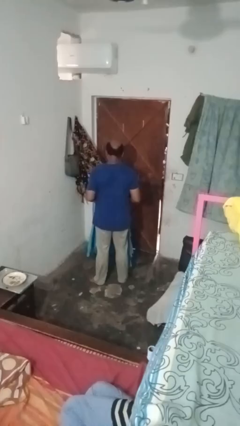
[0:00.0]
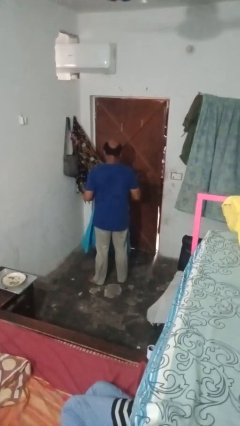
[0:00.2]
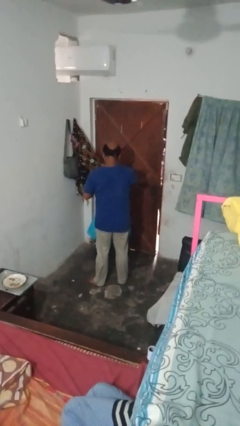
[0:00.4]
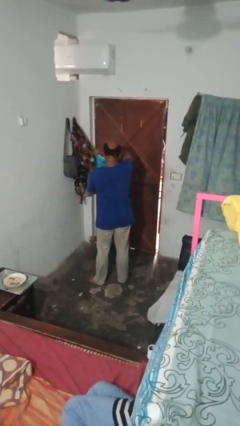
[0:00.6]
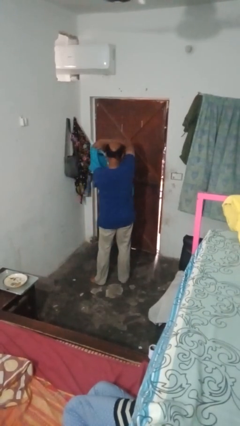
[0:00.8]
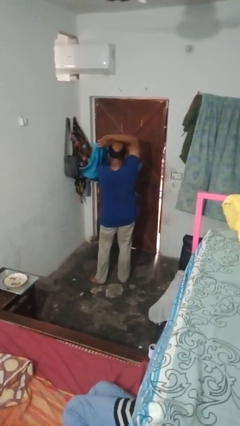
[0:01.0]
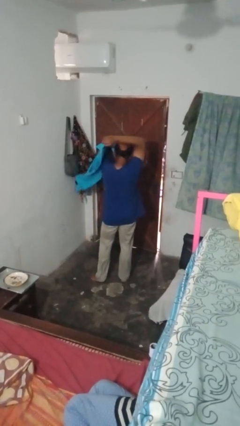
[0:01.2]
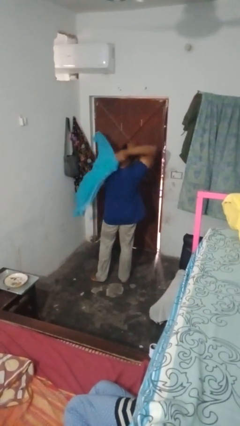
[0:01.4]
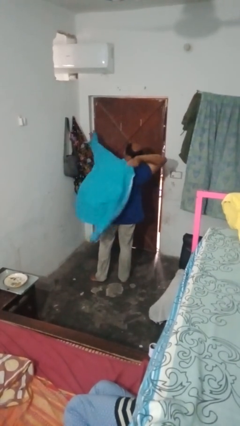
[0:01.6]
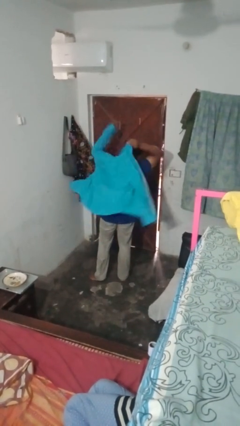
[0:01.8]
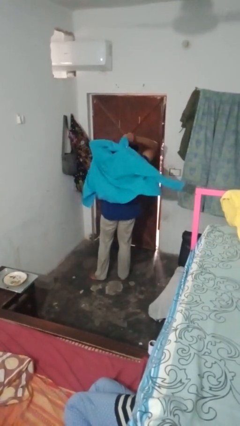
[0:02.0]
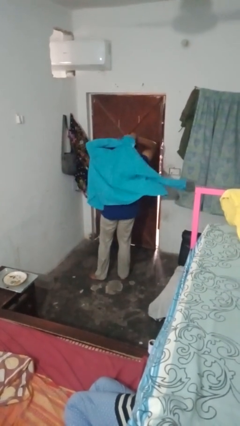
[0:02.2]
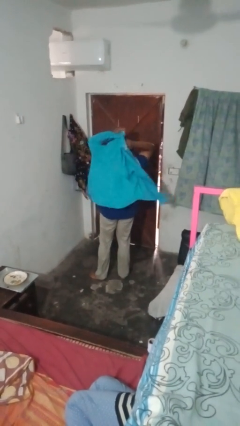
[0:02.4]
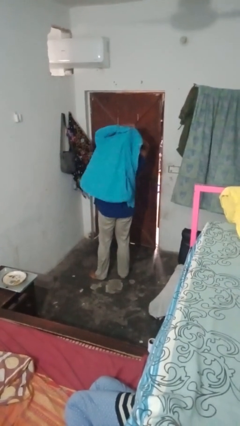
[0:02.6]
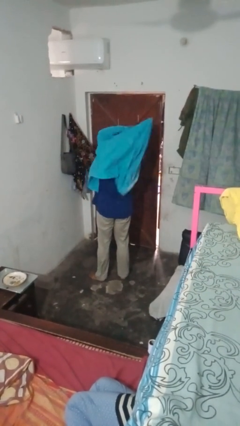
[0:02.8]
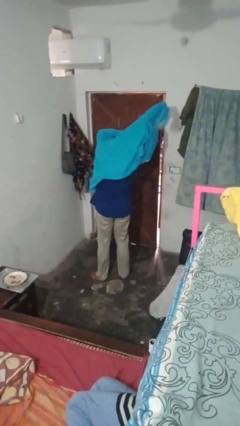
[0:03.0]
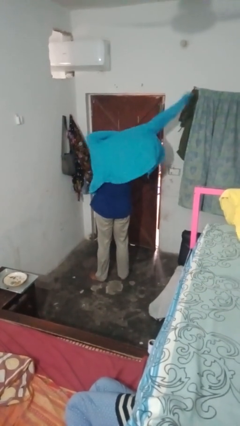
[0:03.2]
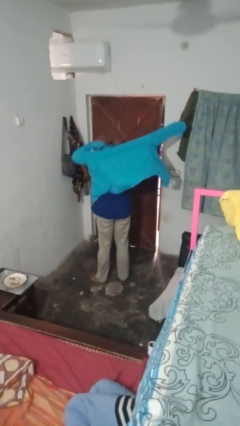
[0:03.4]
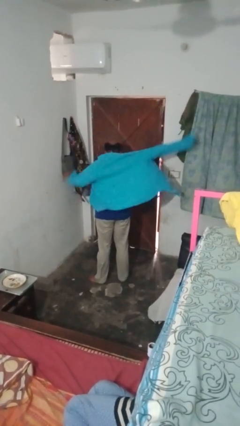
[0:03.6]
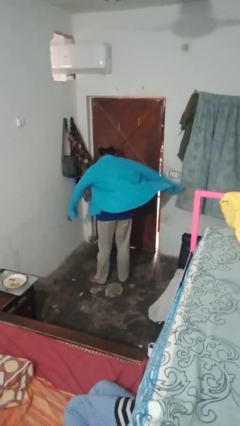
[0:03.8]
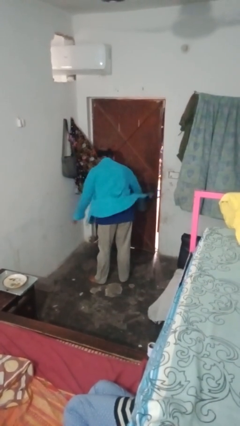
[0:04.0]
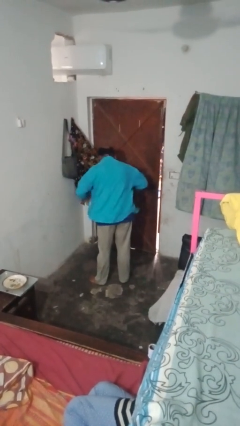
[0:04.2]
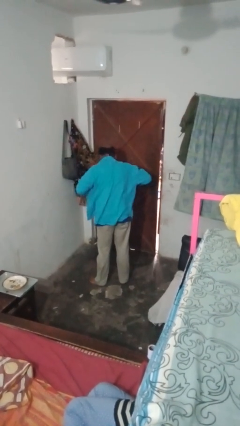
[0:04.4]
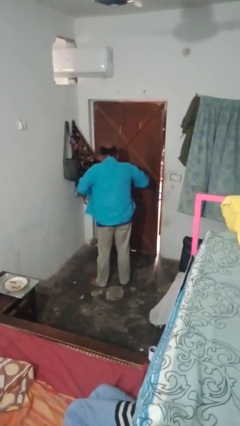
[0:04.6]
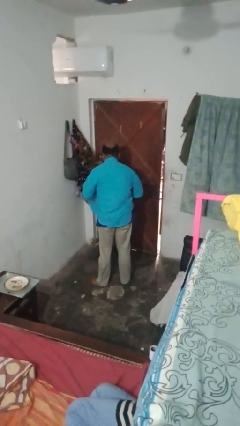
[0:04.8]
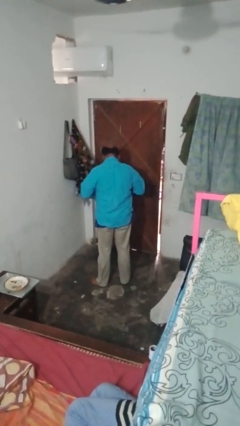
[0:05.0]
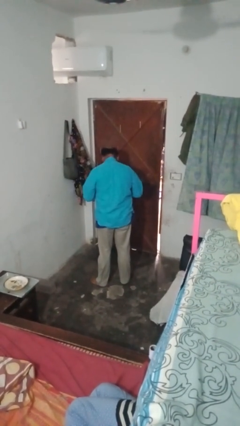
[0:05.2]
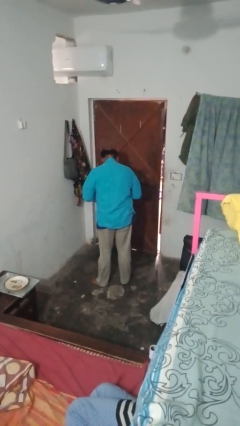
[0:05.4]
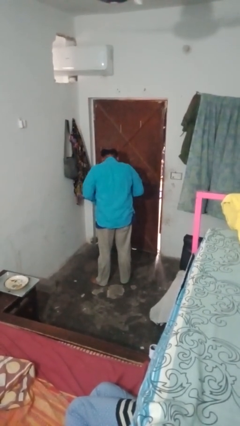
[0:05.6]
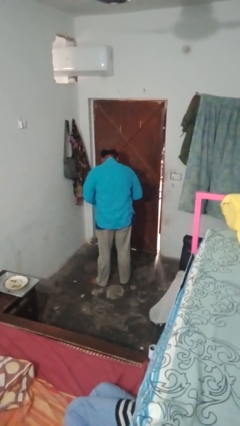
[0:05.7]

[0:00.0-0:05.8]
person puts on shirt

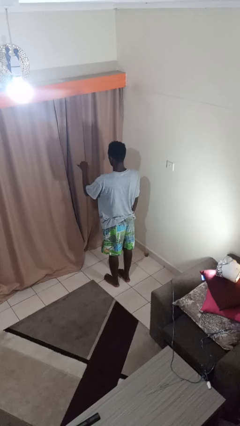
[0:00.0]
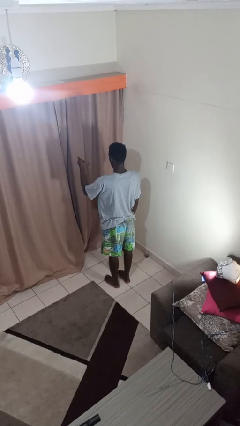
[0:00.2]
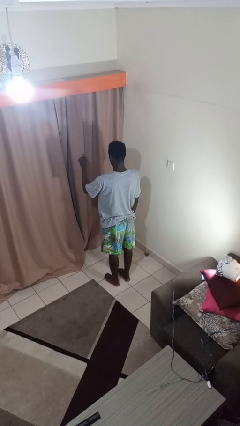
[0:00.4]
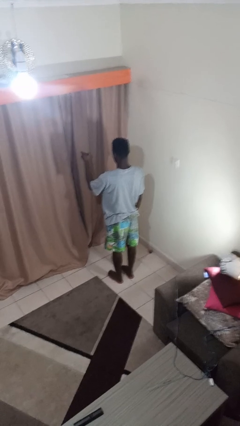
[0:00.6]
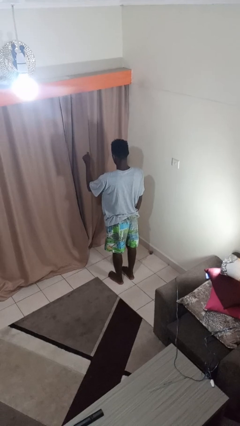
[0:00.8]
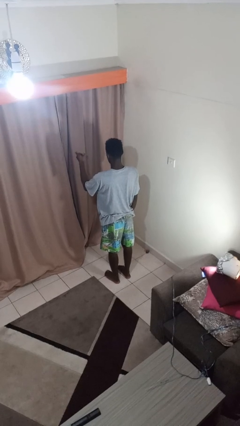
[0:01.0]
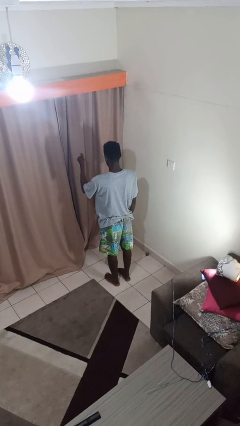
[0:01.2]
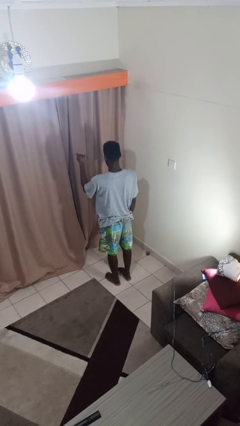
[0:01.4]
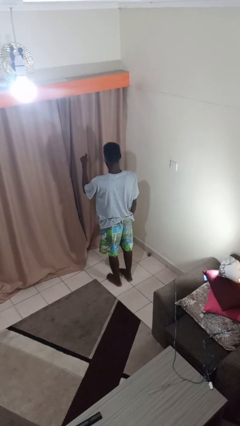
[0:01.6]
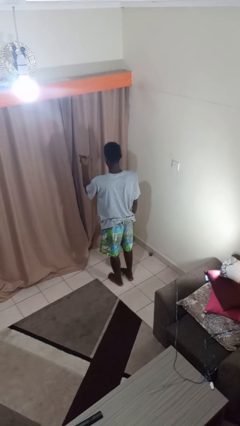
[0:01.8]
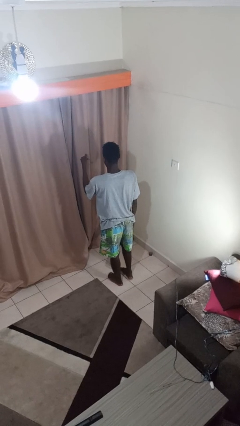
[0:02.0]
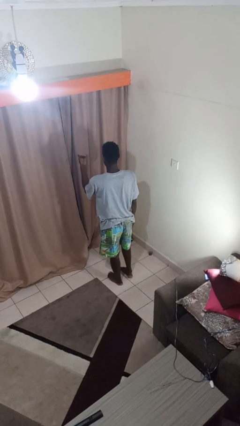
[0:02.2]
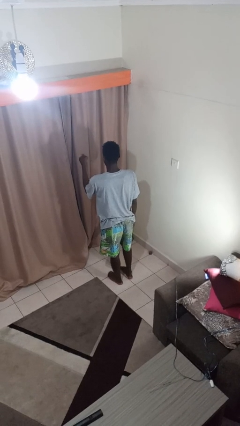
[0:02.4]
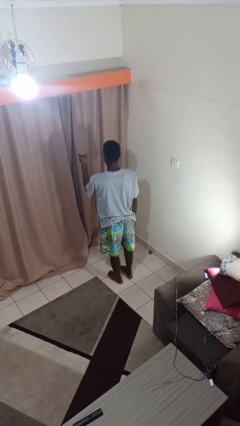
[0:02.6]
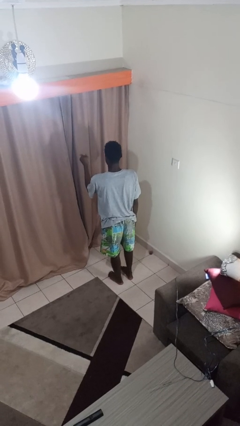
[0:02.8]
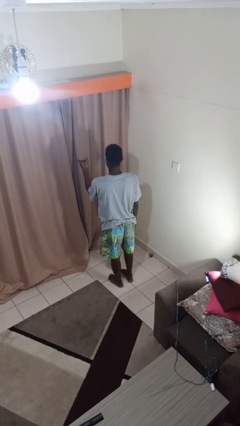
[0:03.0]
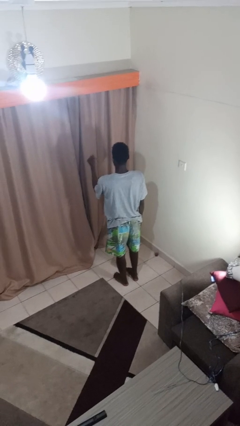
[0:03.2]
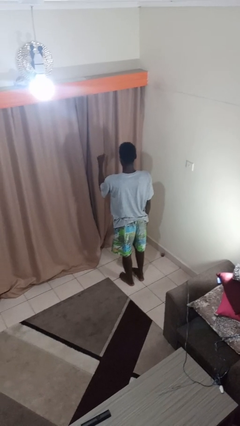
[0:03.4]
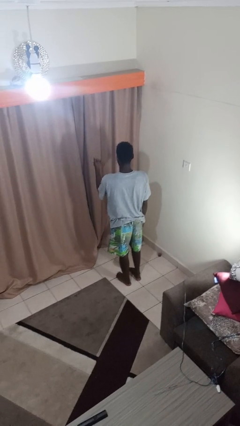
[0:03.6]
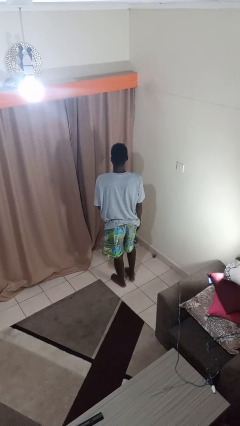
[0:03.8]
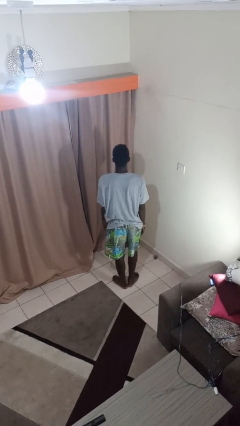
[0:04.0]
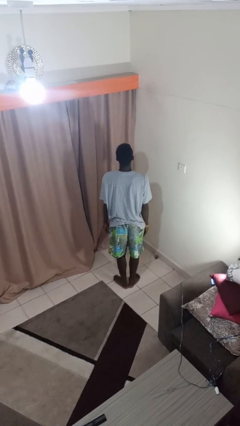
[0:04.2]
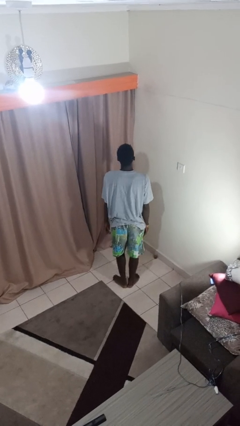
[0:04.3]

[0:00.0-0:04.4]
person gestures hang loose

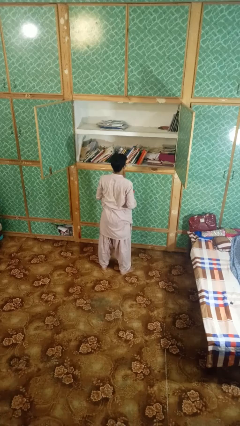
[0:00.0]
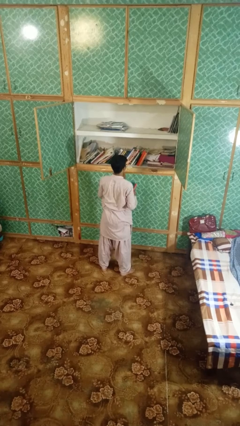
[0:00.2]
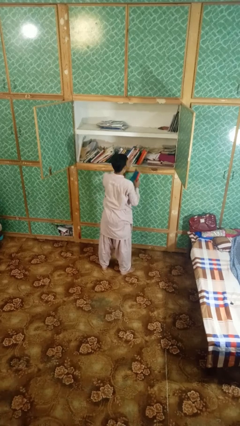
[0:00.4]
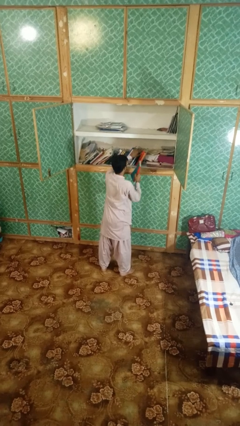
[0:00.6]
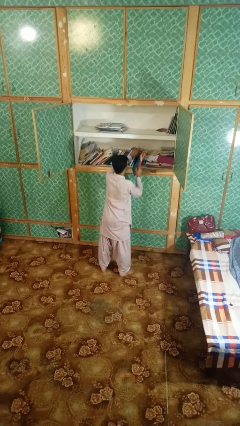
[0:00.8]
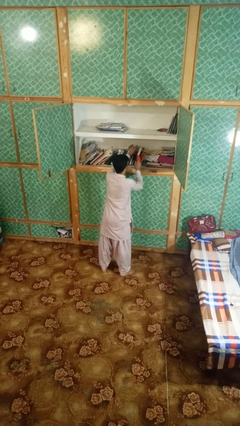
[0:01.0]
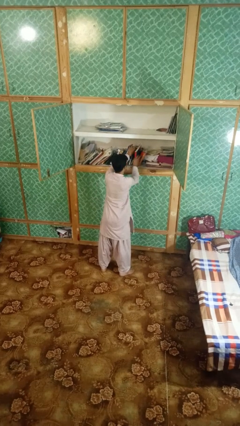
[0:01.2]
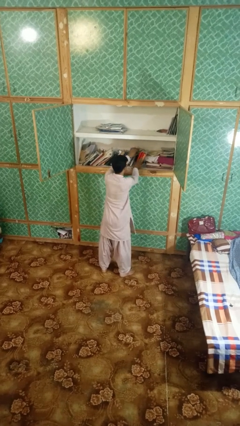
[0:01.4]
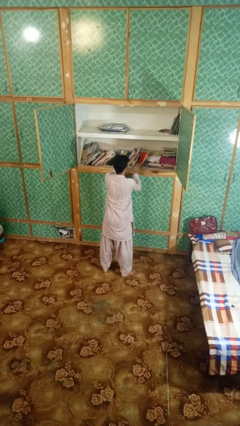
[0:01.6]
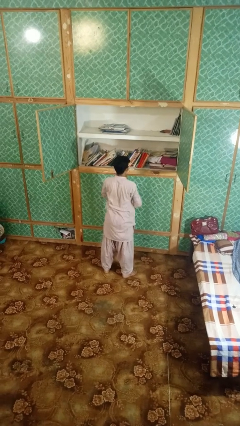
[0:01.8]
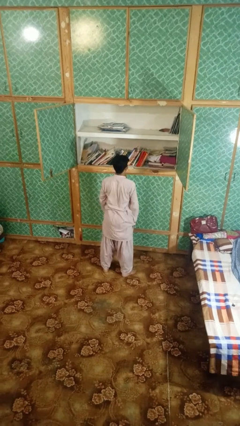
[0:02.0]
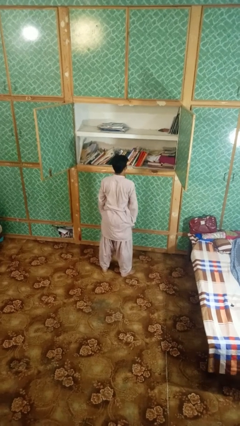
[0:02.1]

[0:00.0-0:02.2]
person puts down object on shelf

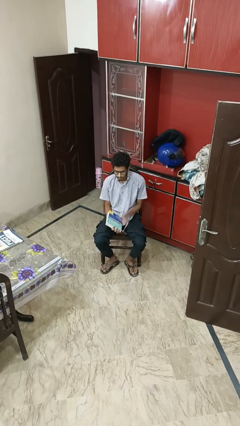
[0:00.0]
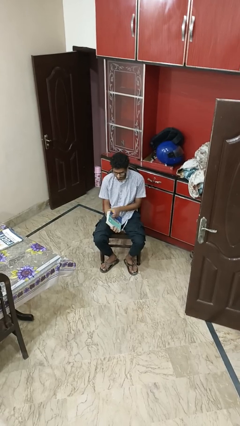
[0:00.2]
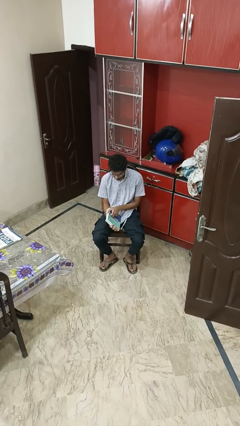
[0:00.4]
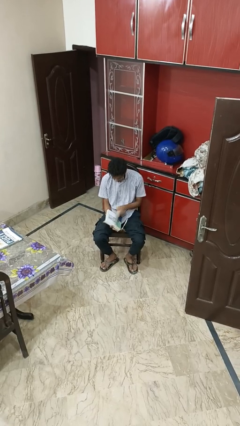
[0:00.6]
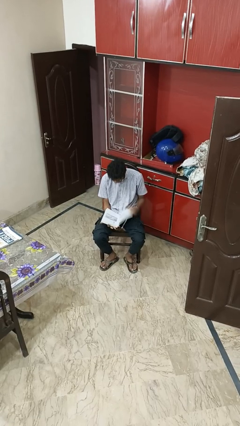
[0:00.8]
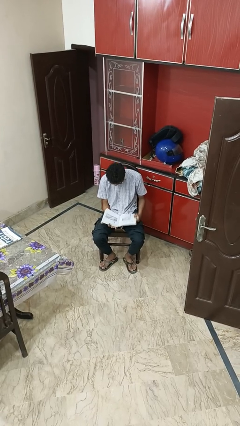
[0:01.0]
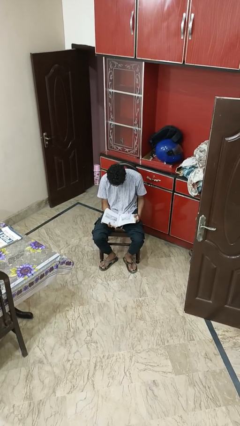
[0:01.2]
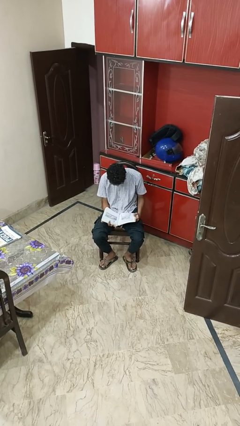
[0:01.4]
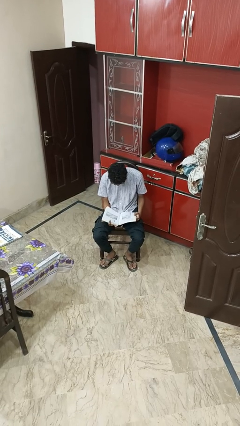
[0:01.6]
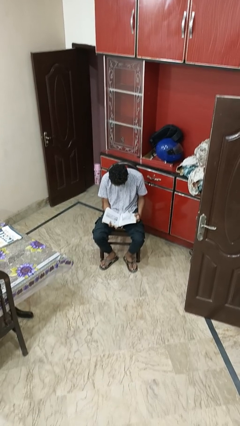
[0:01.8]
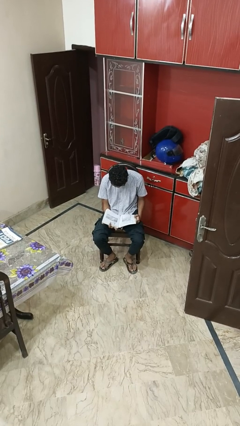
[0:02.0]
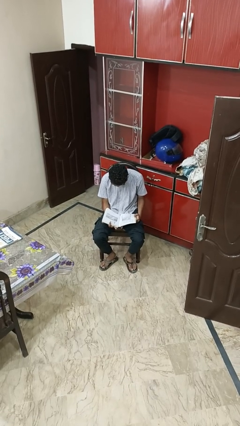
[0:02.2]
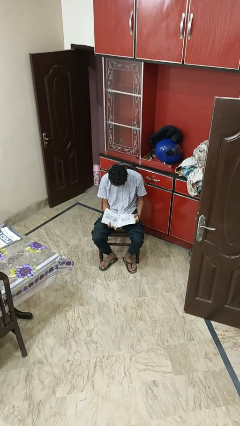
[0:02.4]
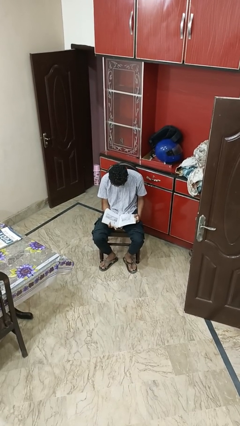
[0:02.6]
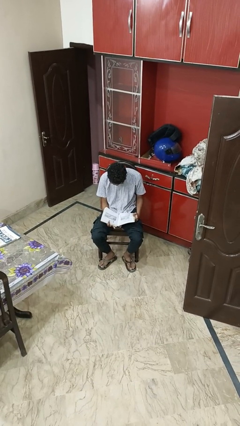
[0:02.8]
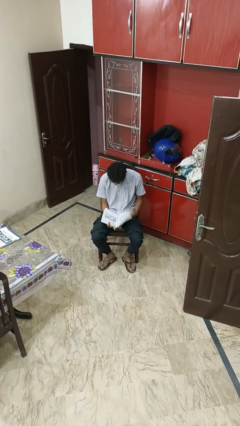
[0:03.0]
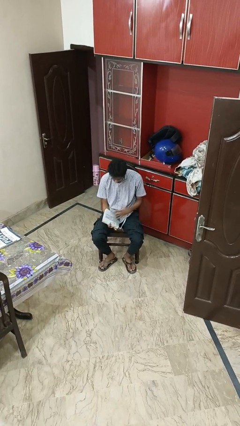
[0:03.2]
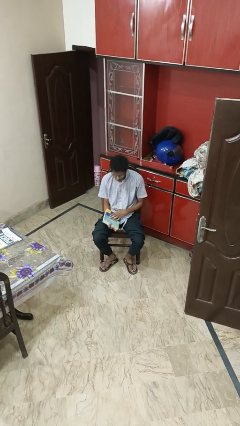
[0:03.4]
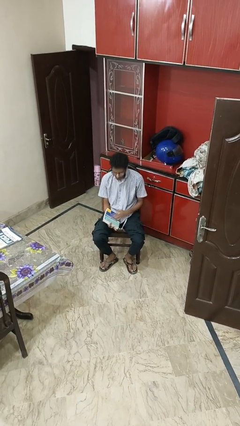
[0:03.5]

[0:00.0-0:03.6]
person reads book

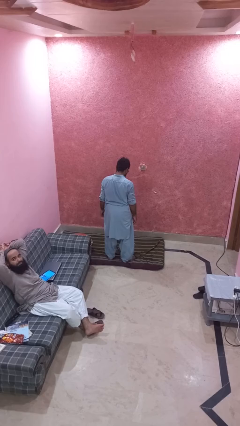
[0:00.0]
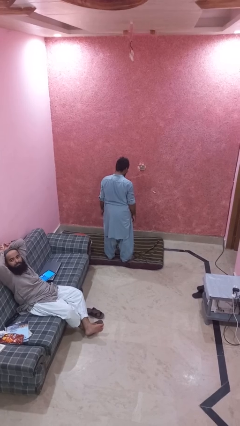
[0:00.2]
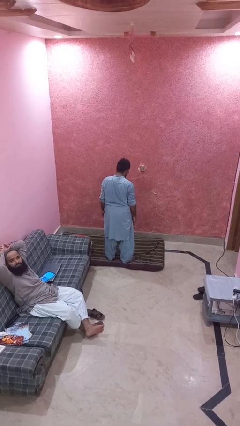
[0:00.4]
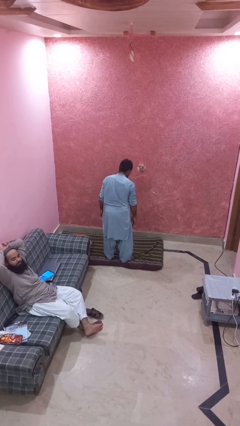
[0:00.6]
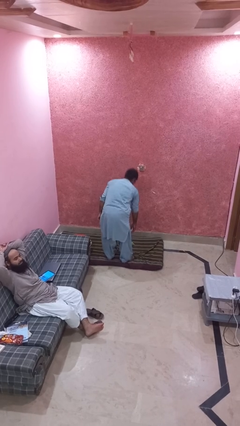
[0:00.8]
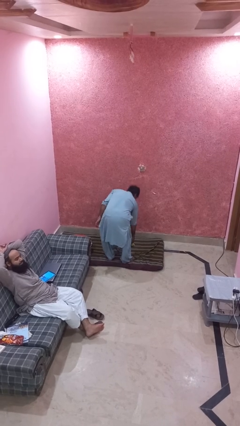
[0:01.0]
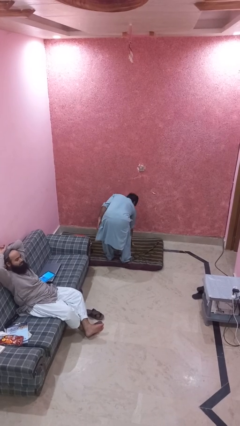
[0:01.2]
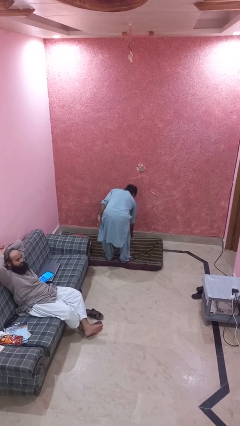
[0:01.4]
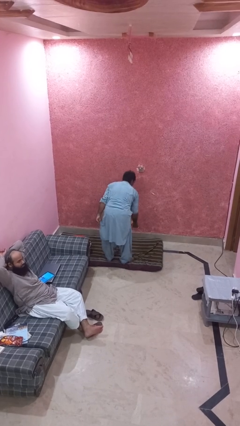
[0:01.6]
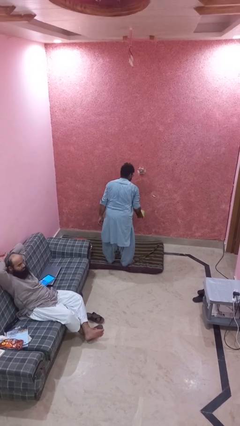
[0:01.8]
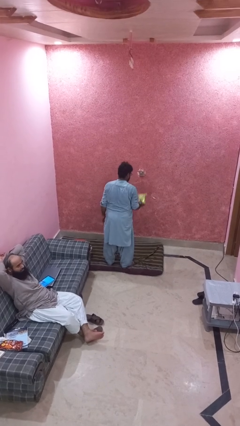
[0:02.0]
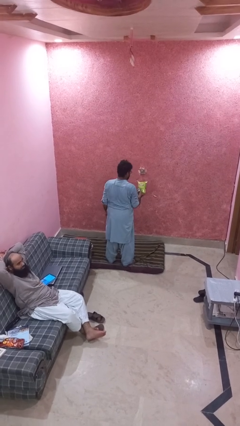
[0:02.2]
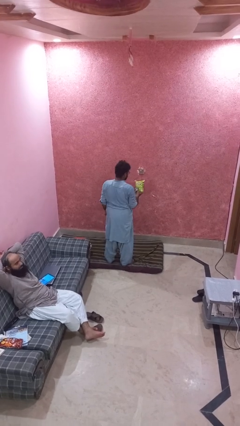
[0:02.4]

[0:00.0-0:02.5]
person picks up object from floor
